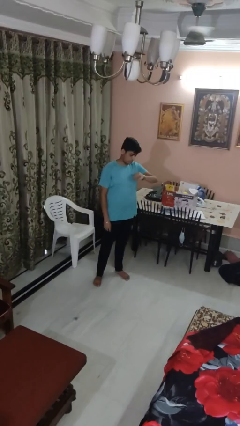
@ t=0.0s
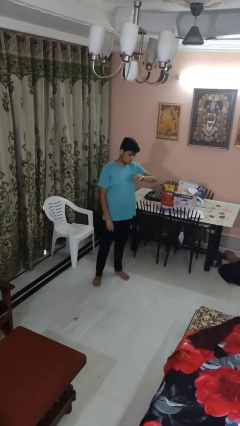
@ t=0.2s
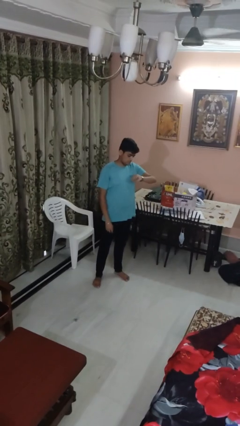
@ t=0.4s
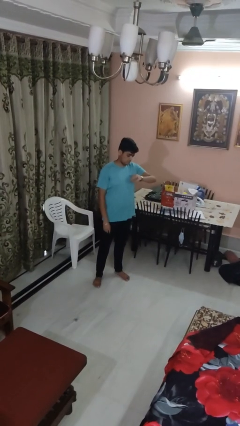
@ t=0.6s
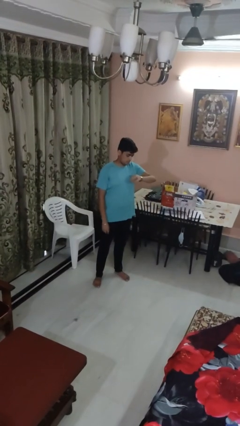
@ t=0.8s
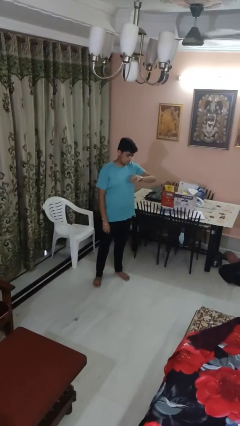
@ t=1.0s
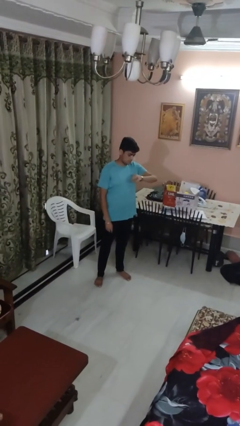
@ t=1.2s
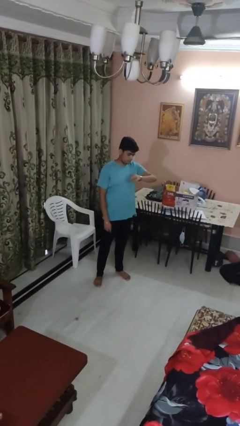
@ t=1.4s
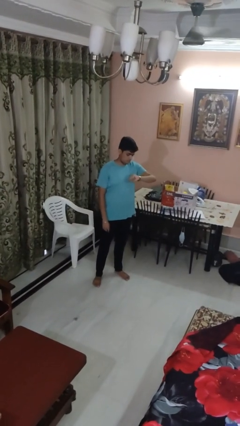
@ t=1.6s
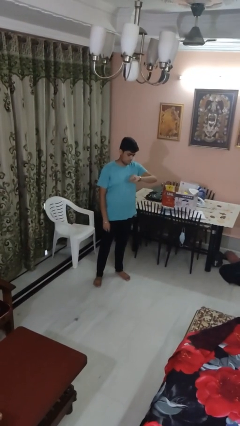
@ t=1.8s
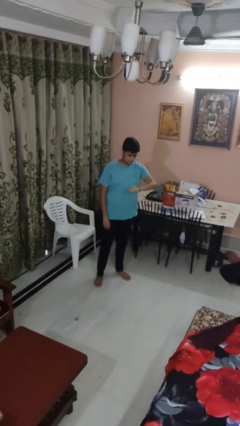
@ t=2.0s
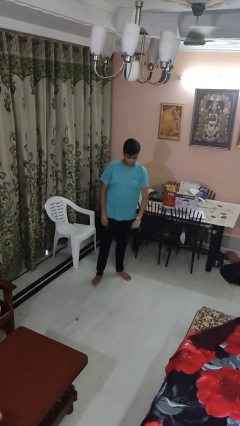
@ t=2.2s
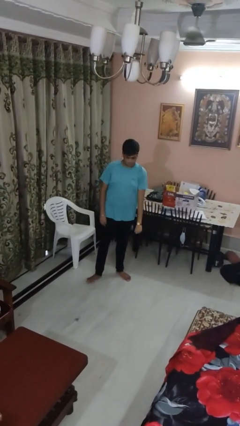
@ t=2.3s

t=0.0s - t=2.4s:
person looks at wristwatch

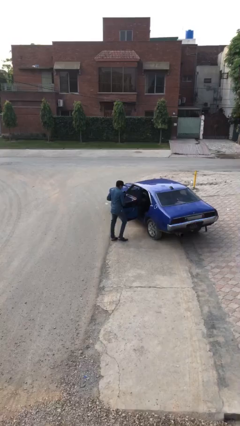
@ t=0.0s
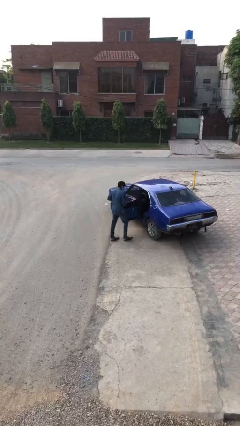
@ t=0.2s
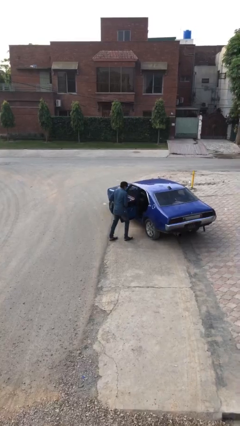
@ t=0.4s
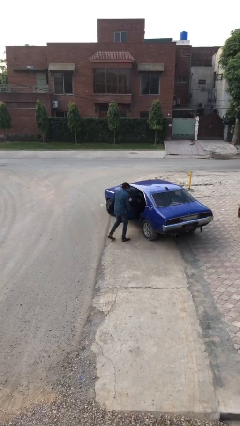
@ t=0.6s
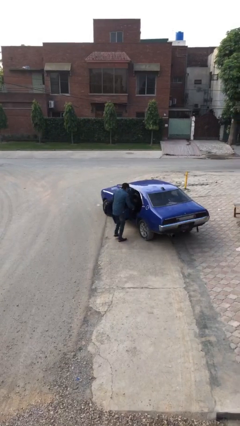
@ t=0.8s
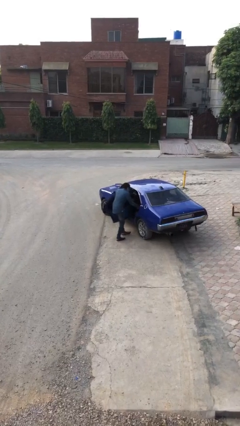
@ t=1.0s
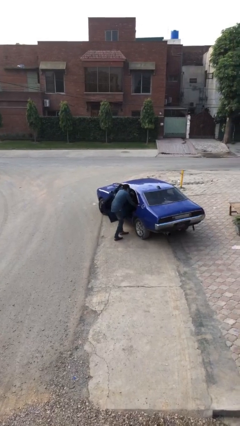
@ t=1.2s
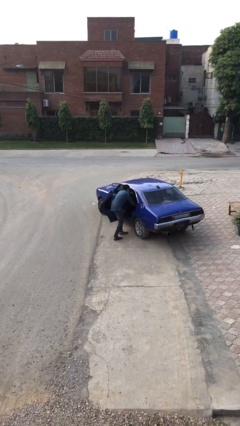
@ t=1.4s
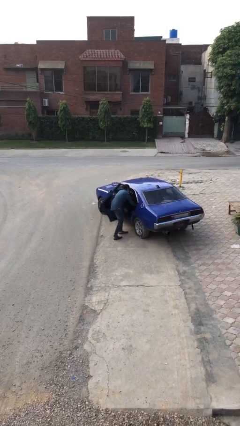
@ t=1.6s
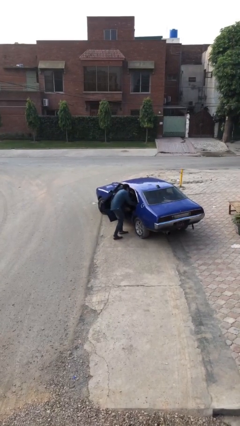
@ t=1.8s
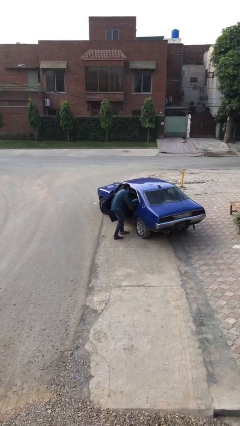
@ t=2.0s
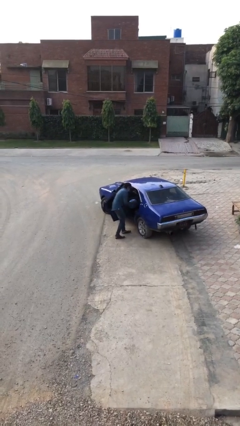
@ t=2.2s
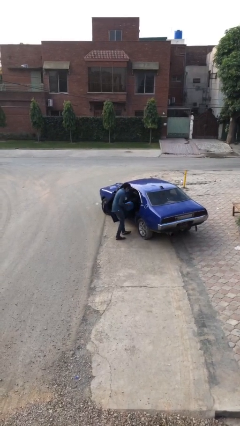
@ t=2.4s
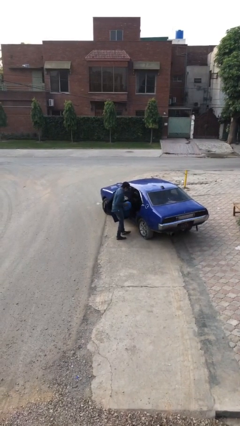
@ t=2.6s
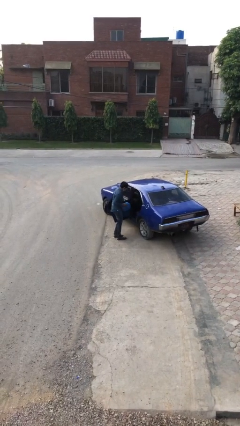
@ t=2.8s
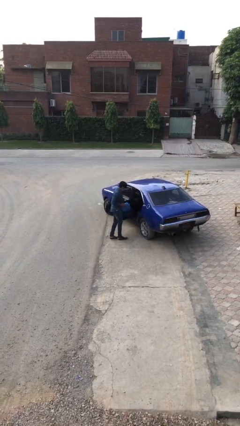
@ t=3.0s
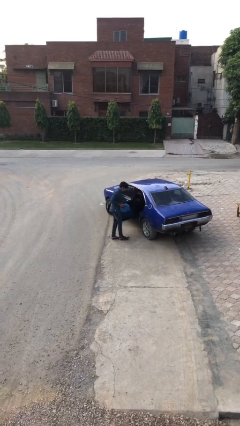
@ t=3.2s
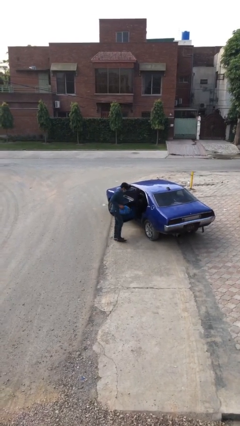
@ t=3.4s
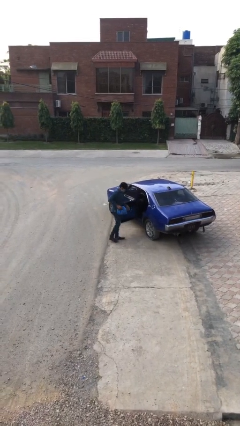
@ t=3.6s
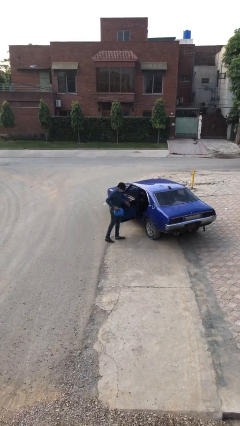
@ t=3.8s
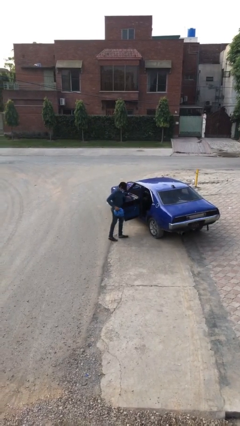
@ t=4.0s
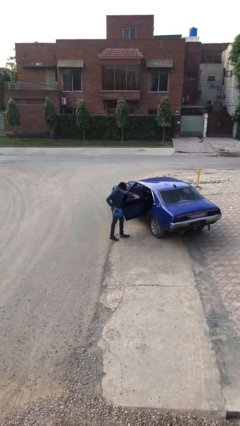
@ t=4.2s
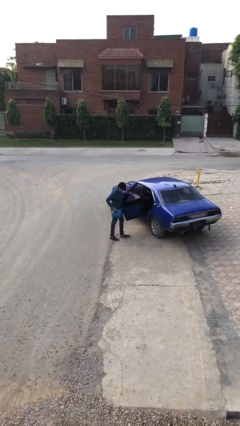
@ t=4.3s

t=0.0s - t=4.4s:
person unloads car

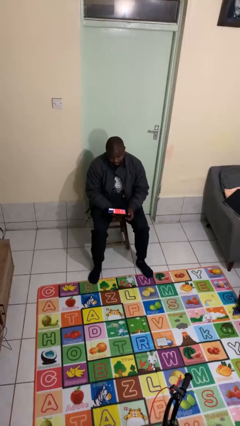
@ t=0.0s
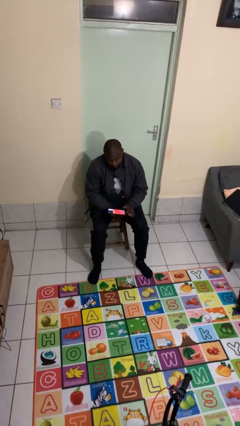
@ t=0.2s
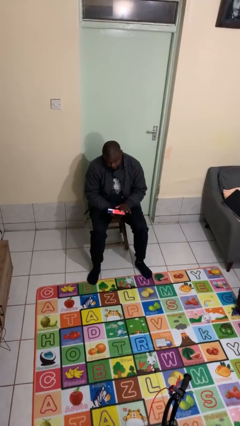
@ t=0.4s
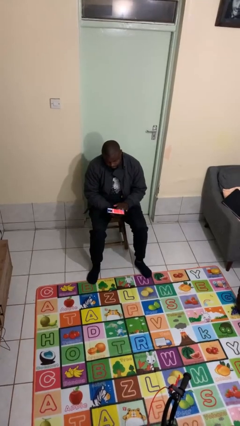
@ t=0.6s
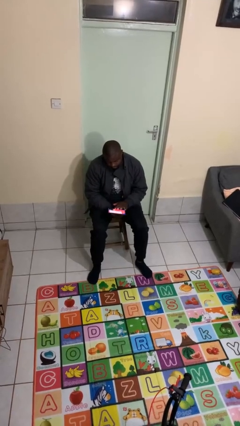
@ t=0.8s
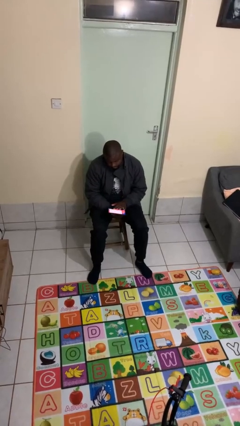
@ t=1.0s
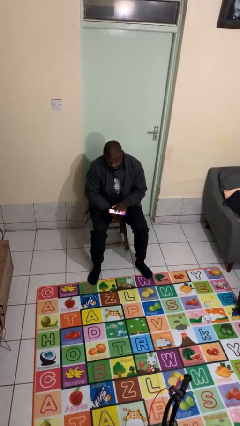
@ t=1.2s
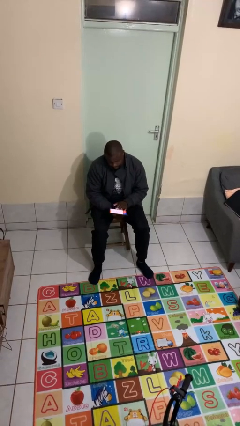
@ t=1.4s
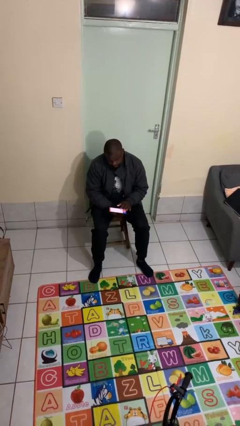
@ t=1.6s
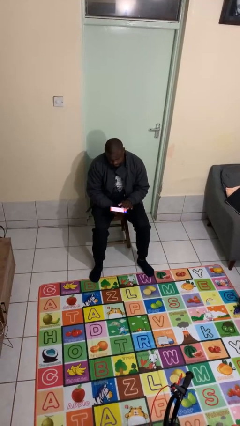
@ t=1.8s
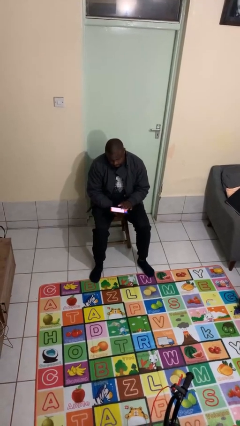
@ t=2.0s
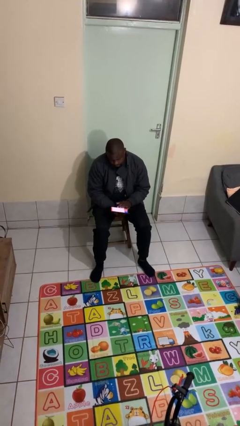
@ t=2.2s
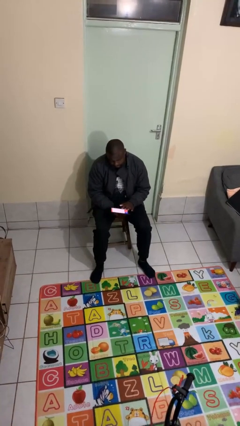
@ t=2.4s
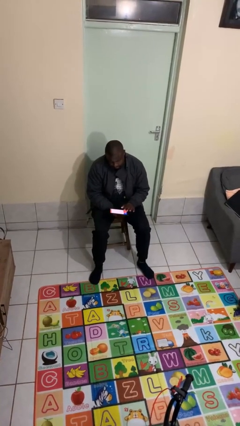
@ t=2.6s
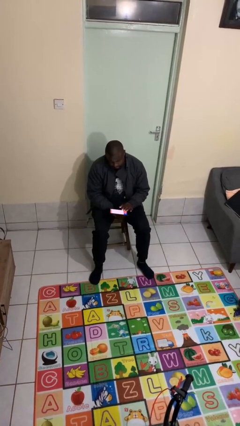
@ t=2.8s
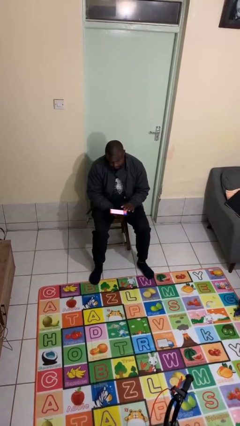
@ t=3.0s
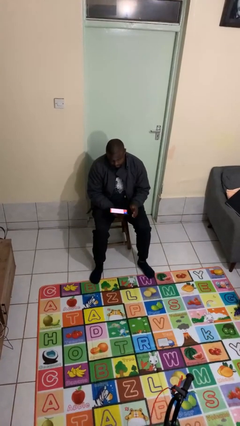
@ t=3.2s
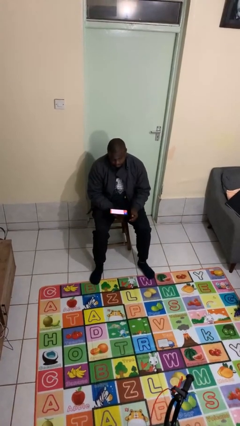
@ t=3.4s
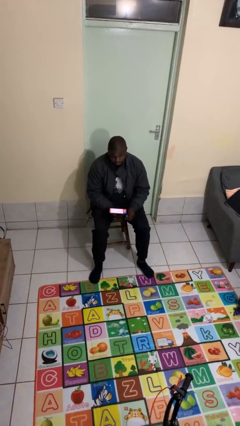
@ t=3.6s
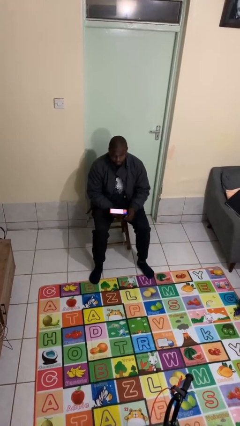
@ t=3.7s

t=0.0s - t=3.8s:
person interacts with tablet

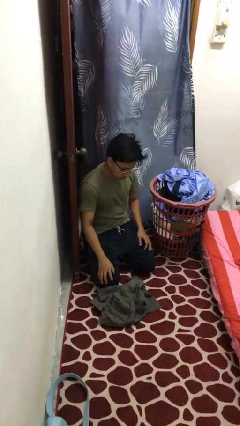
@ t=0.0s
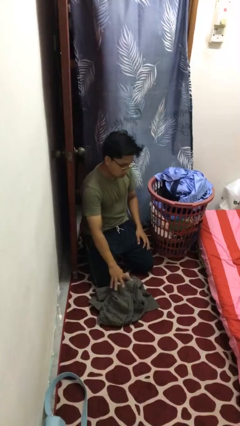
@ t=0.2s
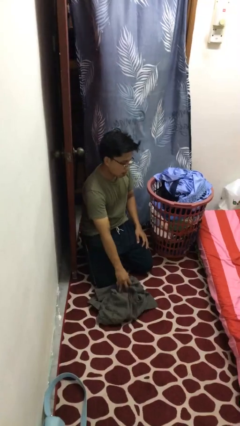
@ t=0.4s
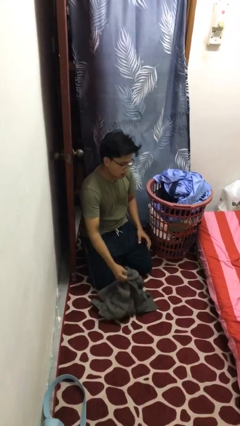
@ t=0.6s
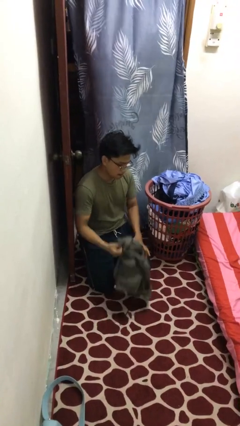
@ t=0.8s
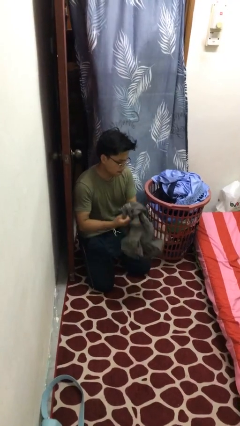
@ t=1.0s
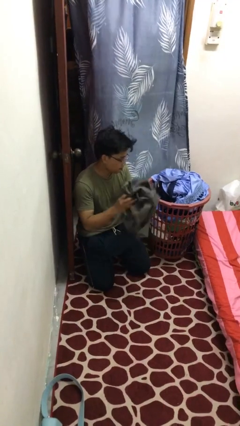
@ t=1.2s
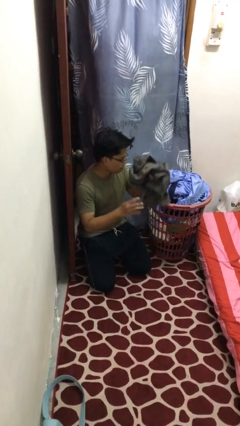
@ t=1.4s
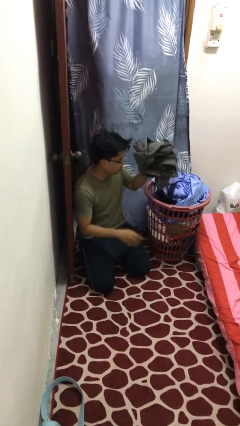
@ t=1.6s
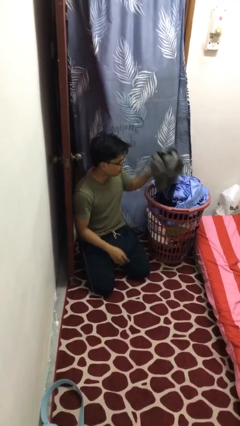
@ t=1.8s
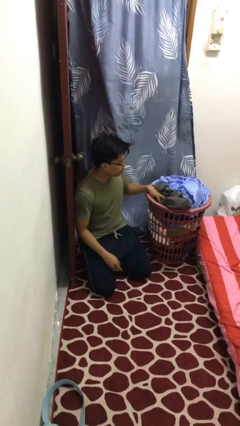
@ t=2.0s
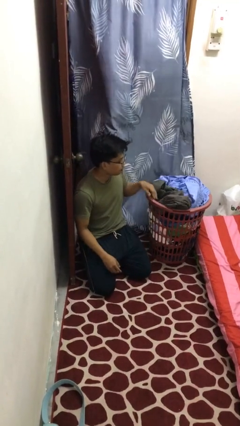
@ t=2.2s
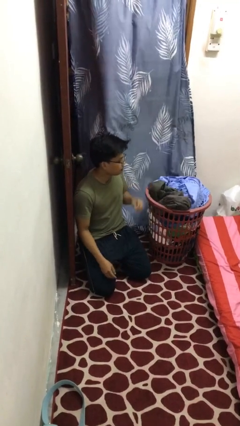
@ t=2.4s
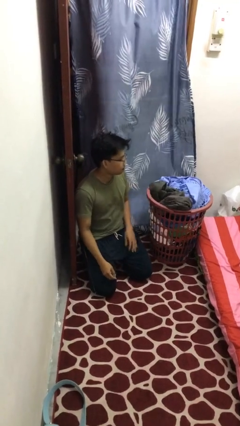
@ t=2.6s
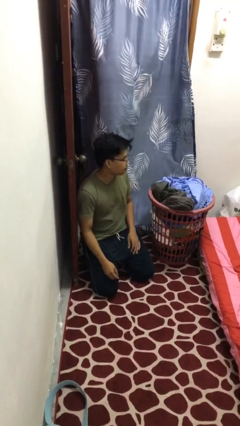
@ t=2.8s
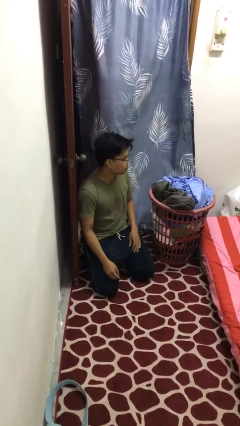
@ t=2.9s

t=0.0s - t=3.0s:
person puts object into basket

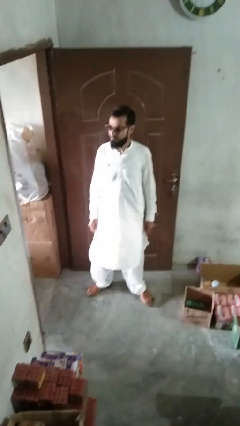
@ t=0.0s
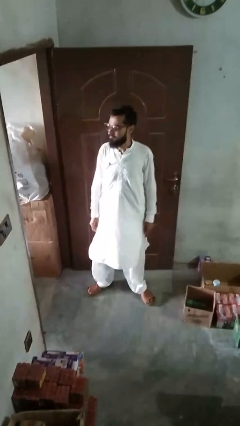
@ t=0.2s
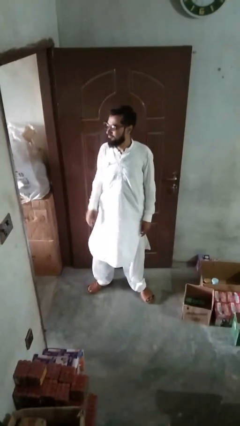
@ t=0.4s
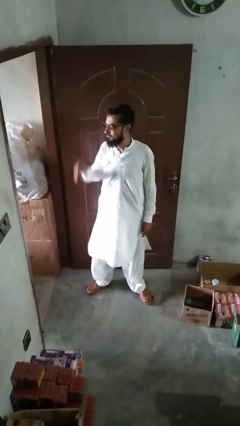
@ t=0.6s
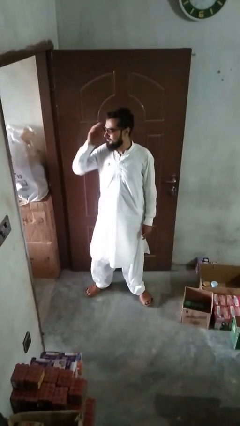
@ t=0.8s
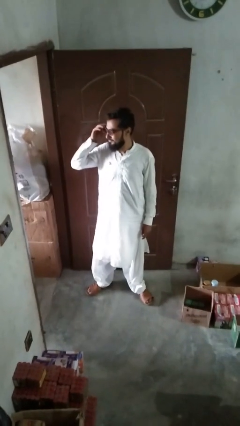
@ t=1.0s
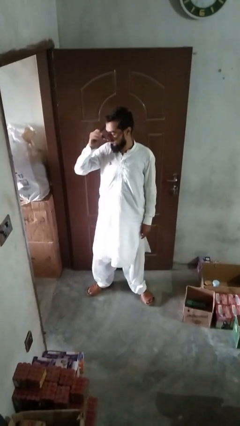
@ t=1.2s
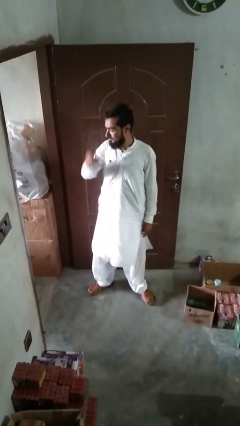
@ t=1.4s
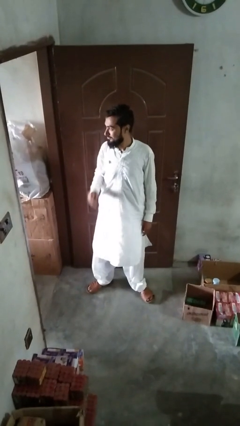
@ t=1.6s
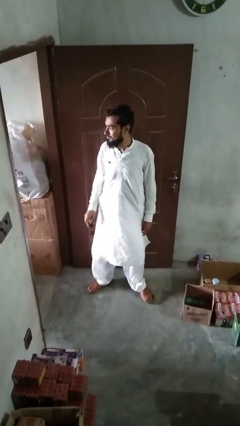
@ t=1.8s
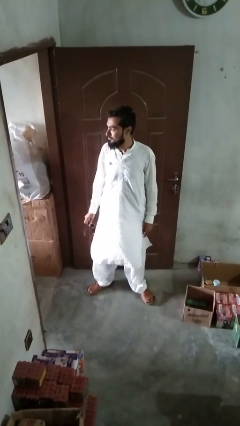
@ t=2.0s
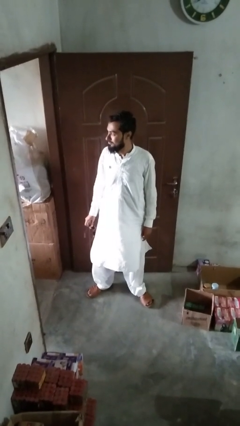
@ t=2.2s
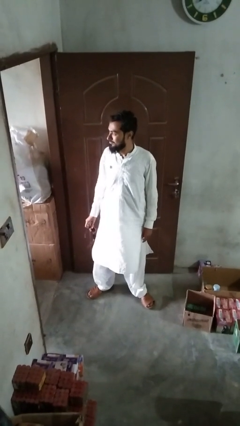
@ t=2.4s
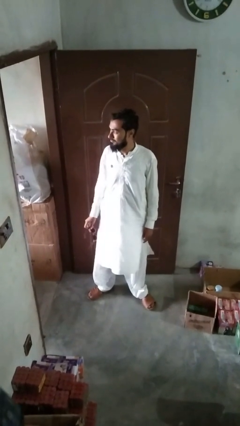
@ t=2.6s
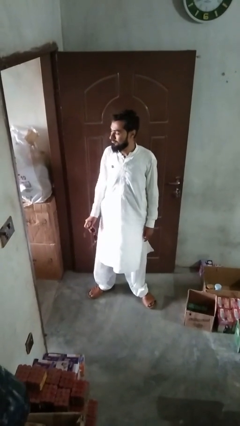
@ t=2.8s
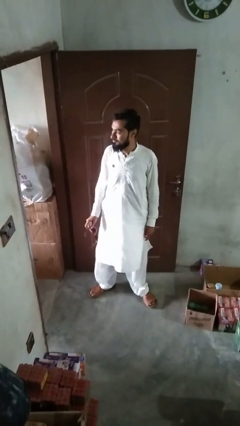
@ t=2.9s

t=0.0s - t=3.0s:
person takes off sunglasses

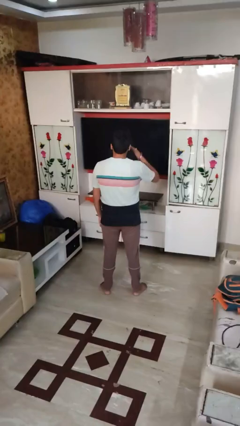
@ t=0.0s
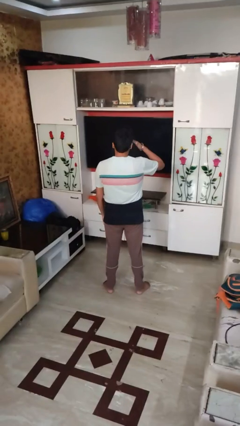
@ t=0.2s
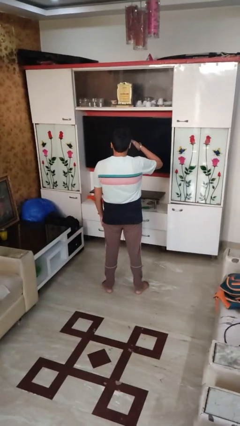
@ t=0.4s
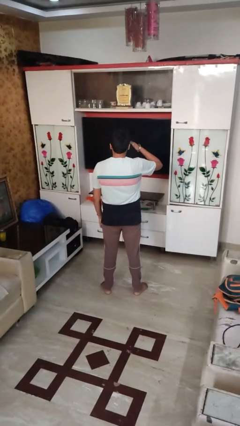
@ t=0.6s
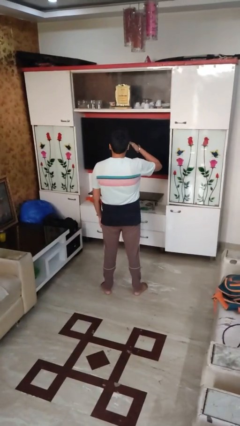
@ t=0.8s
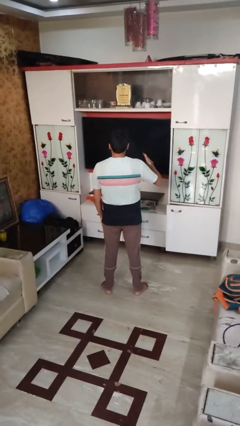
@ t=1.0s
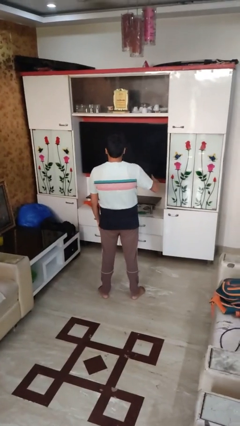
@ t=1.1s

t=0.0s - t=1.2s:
person salutes
